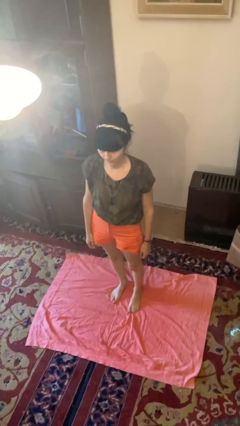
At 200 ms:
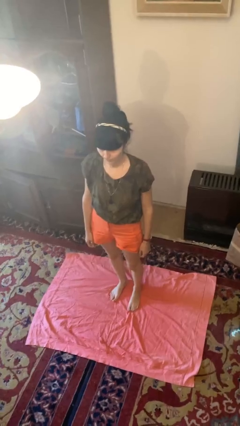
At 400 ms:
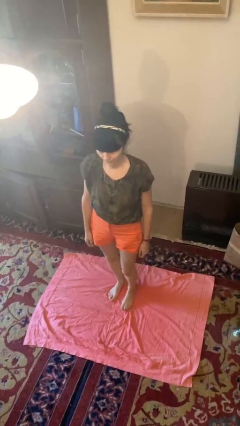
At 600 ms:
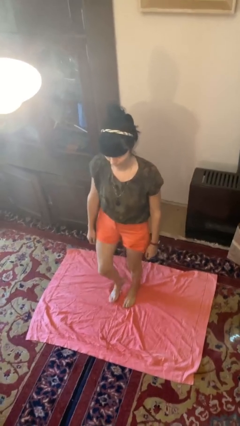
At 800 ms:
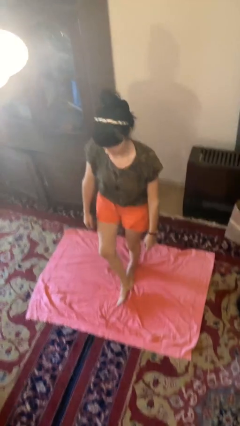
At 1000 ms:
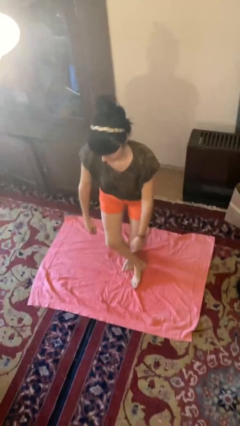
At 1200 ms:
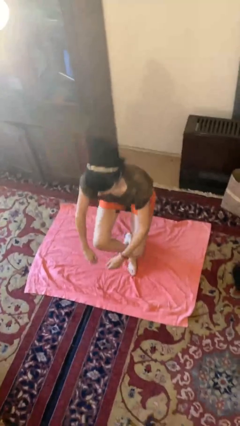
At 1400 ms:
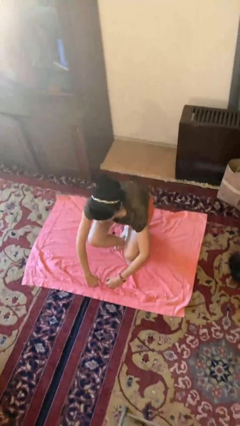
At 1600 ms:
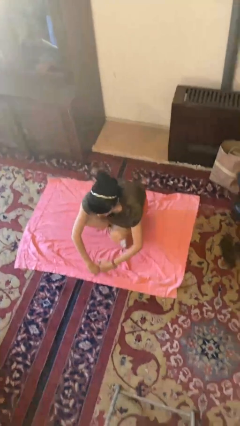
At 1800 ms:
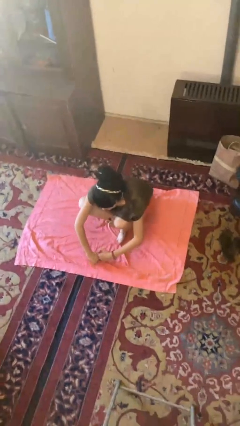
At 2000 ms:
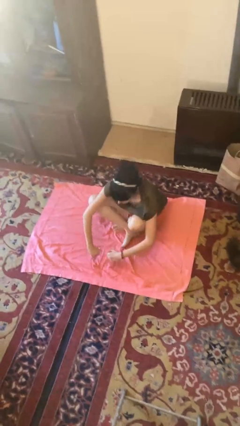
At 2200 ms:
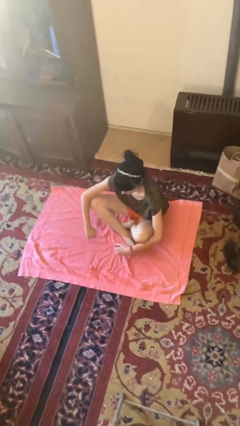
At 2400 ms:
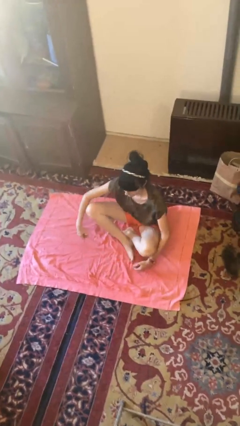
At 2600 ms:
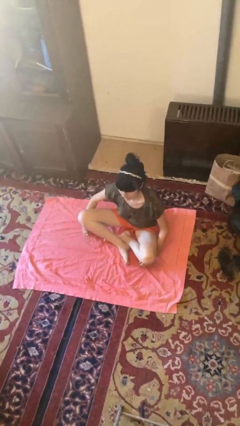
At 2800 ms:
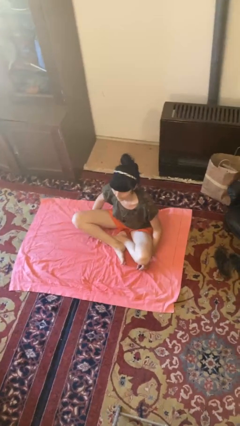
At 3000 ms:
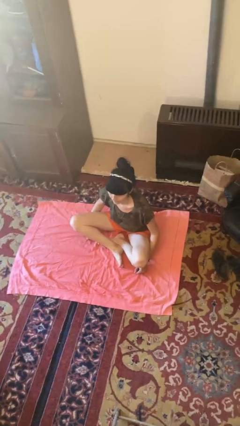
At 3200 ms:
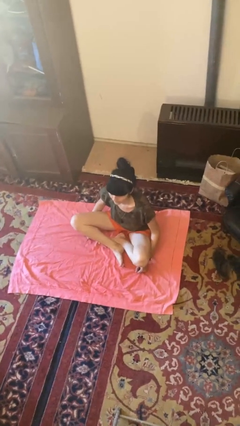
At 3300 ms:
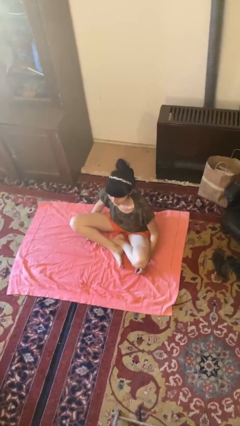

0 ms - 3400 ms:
person sits crisscross

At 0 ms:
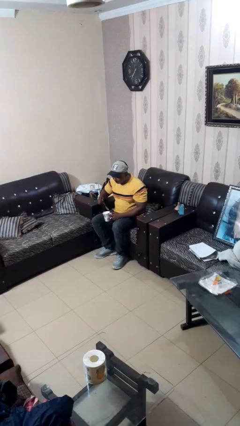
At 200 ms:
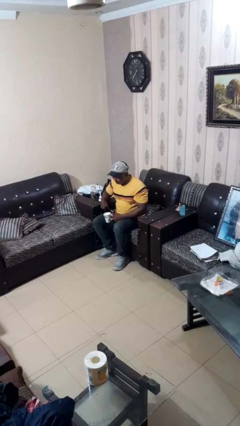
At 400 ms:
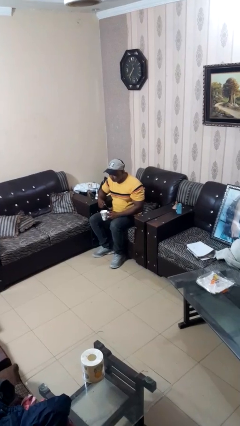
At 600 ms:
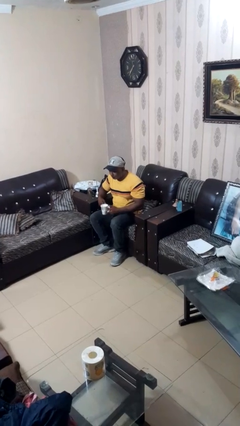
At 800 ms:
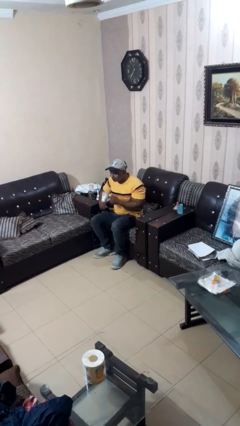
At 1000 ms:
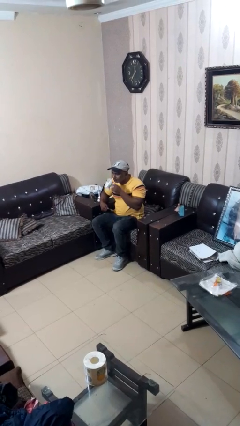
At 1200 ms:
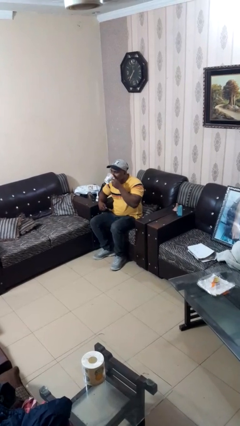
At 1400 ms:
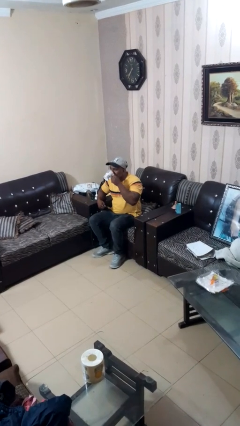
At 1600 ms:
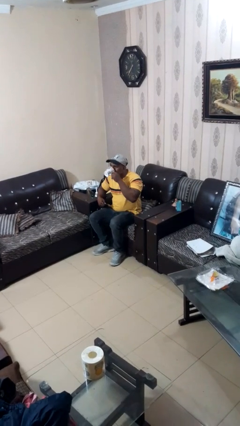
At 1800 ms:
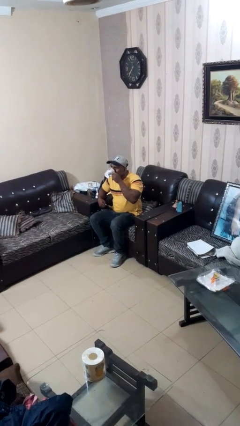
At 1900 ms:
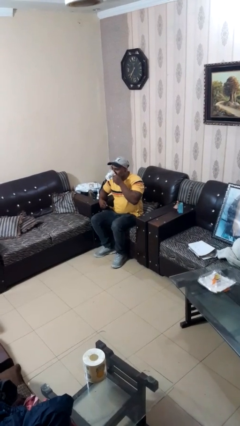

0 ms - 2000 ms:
person drinks from mug

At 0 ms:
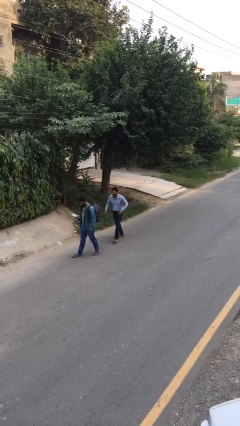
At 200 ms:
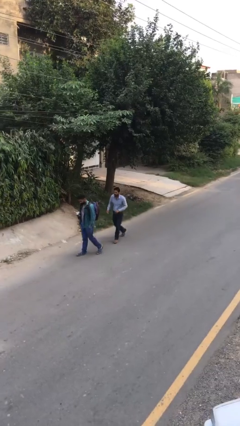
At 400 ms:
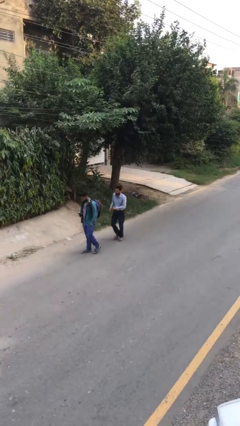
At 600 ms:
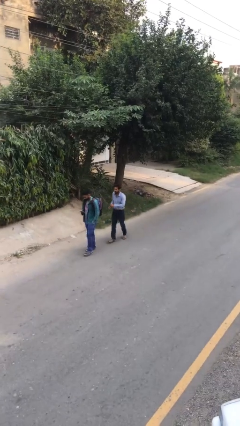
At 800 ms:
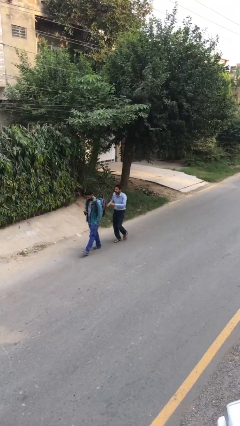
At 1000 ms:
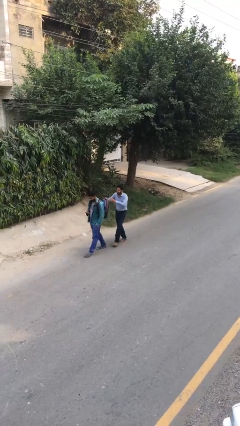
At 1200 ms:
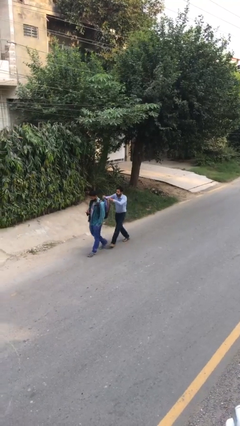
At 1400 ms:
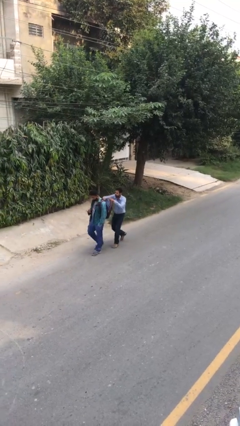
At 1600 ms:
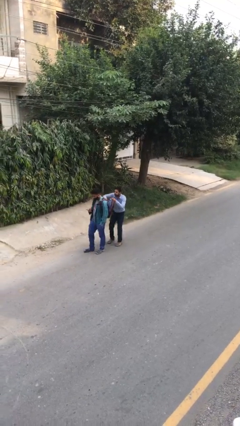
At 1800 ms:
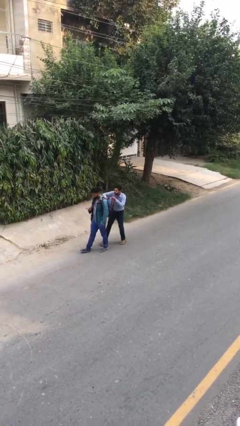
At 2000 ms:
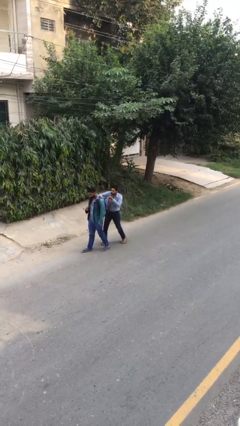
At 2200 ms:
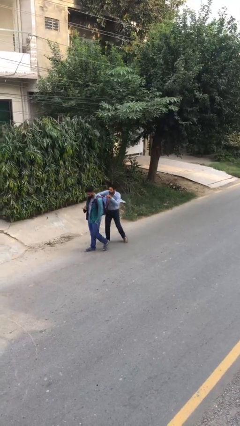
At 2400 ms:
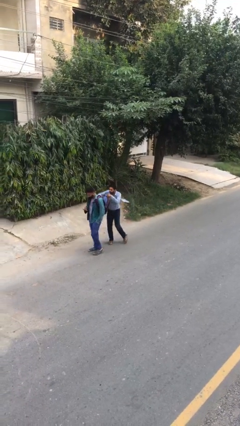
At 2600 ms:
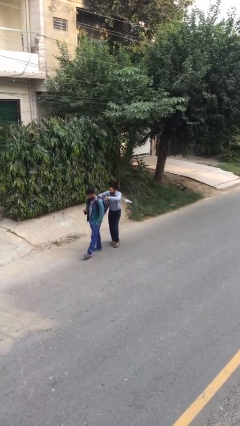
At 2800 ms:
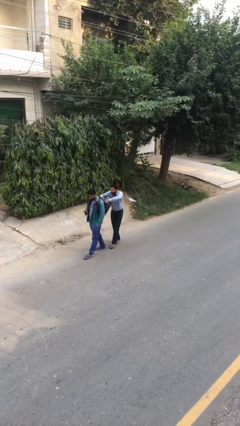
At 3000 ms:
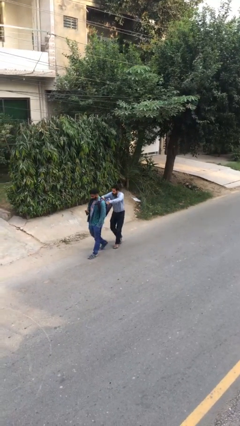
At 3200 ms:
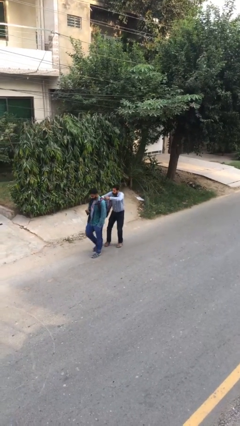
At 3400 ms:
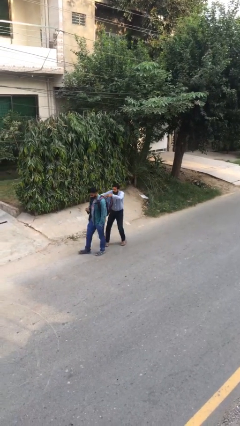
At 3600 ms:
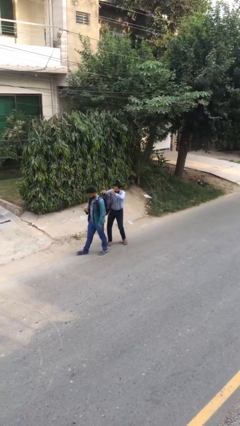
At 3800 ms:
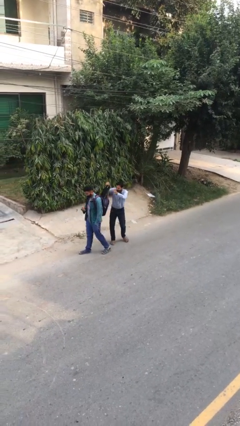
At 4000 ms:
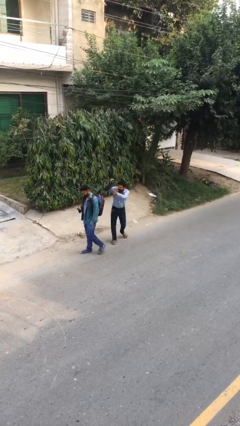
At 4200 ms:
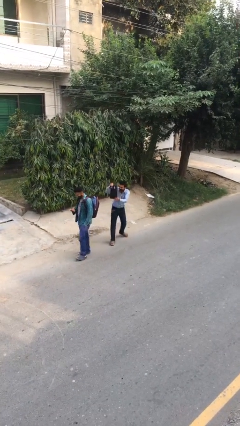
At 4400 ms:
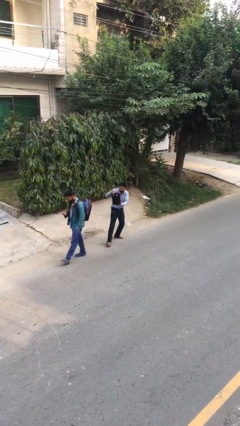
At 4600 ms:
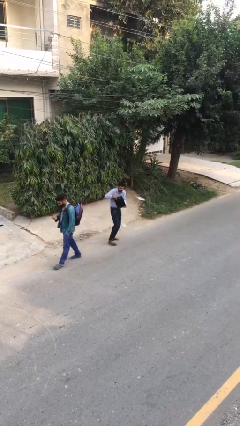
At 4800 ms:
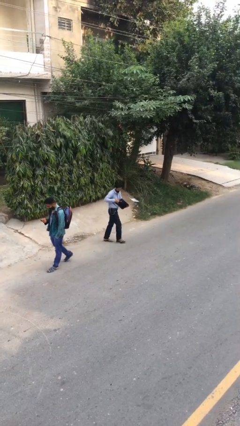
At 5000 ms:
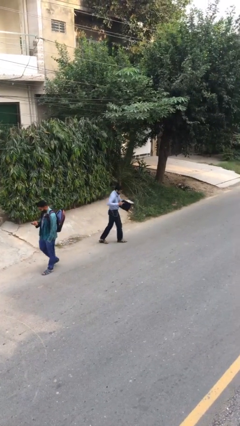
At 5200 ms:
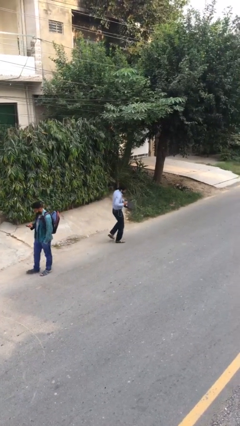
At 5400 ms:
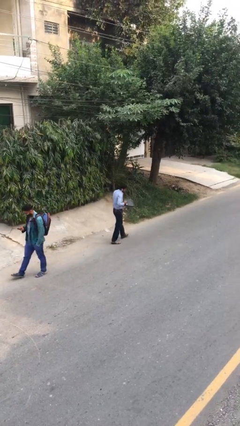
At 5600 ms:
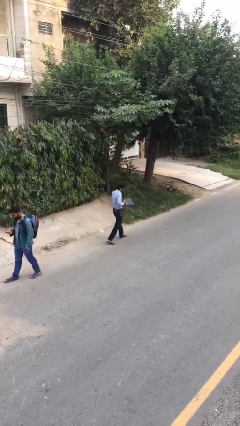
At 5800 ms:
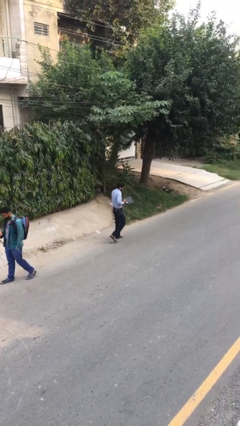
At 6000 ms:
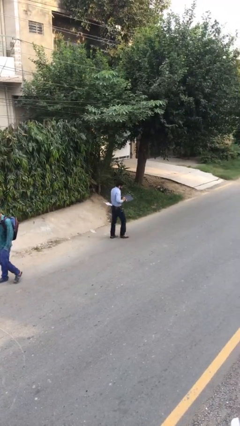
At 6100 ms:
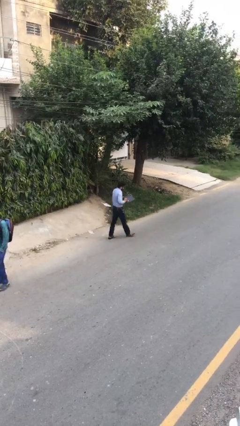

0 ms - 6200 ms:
person steals object from person

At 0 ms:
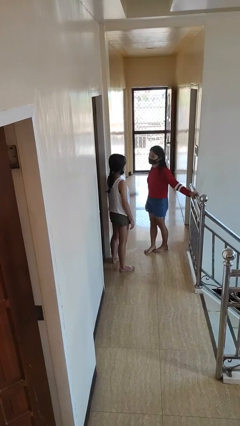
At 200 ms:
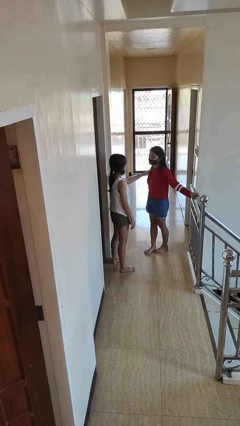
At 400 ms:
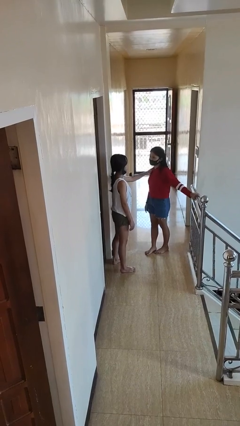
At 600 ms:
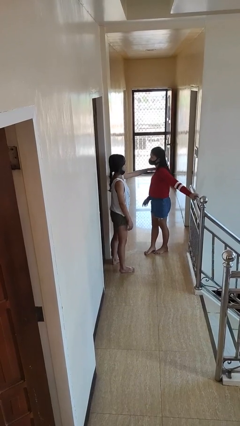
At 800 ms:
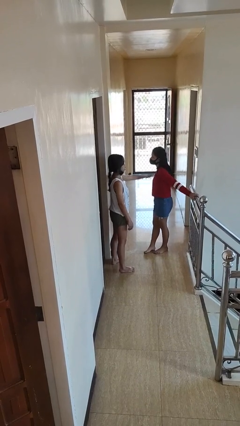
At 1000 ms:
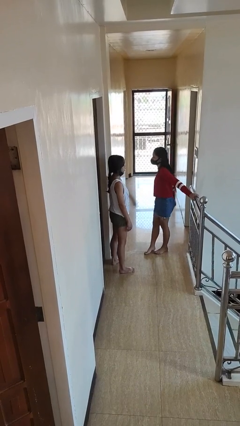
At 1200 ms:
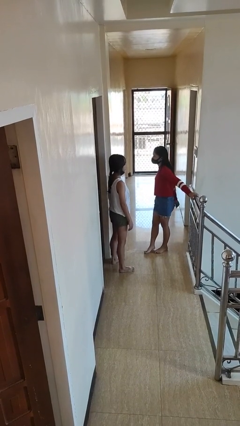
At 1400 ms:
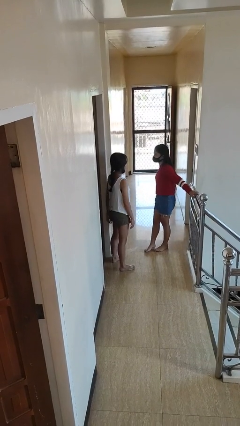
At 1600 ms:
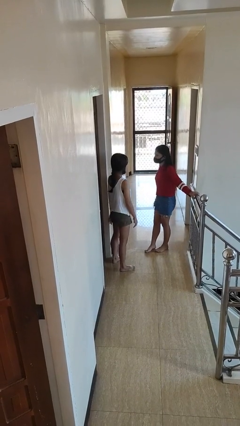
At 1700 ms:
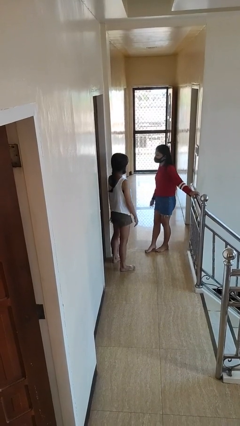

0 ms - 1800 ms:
person shoves person

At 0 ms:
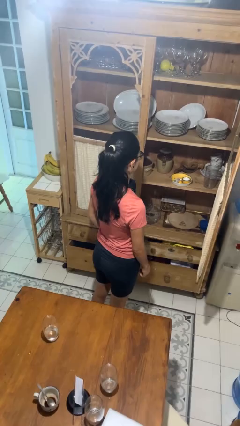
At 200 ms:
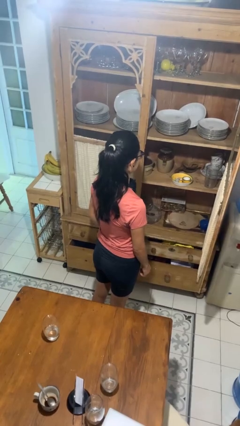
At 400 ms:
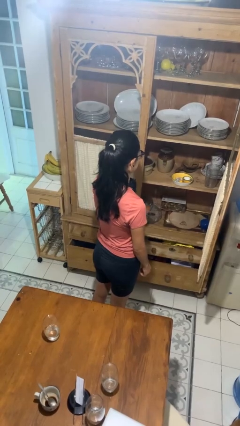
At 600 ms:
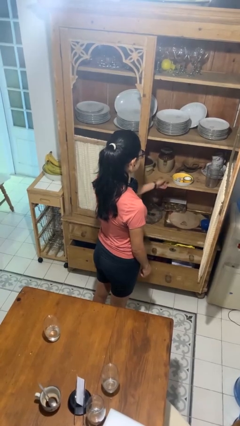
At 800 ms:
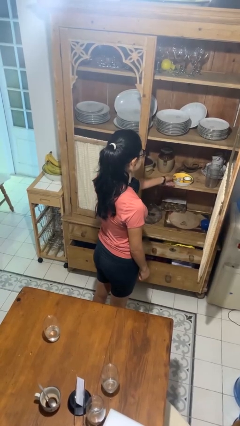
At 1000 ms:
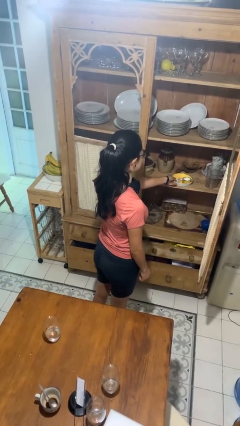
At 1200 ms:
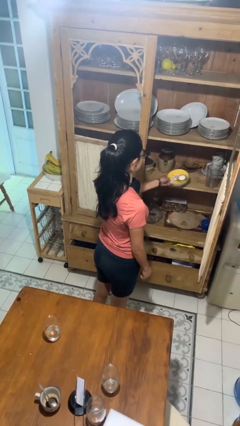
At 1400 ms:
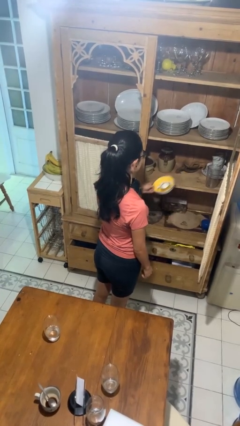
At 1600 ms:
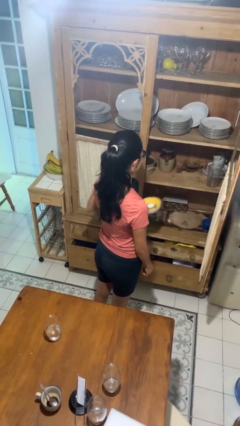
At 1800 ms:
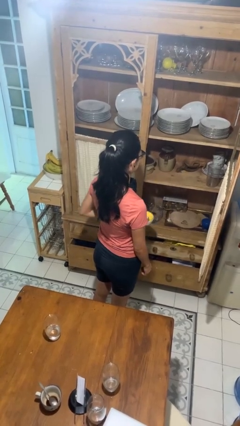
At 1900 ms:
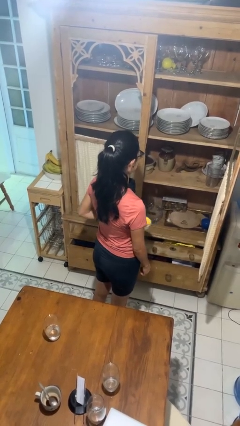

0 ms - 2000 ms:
person takes object from cabinet

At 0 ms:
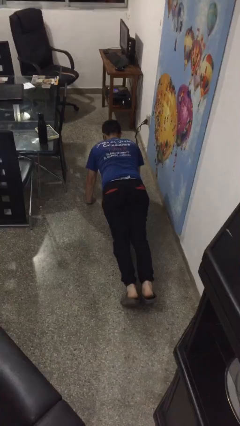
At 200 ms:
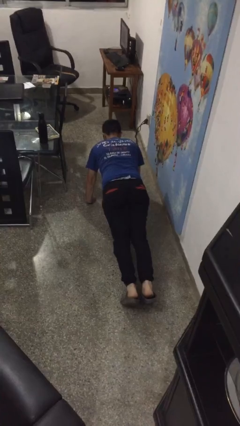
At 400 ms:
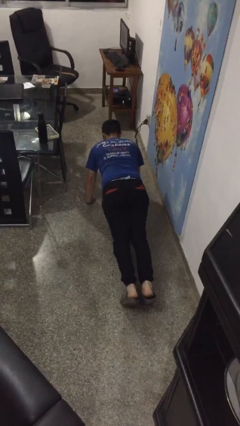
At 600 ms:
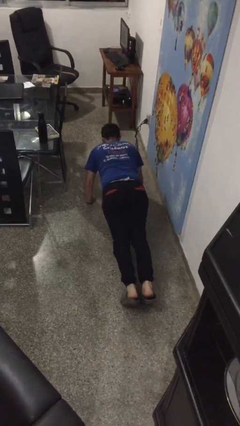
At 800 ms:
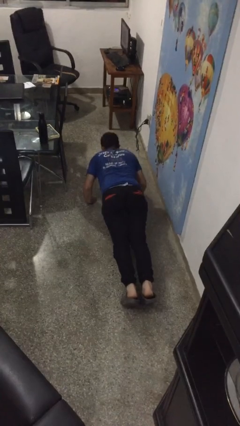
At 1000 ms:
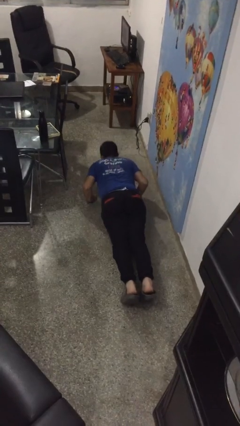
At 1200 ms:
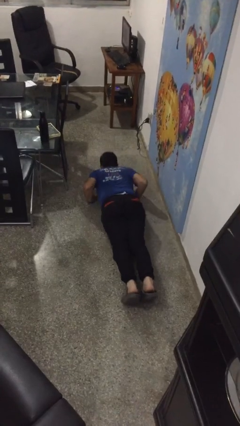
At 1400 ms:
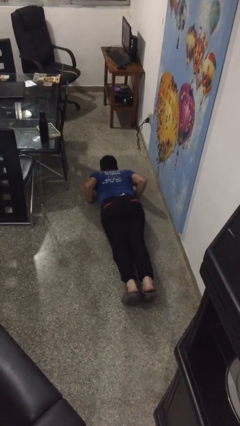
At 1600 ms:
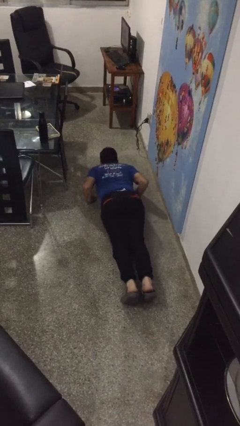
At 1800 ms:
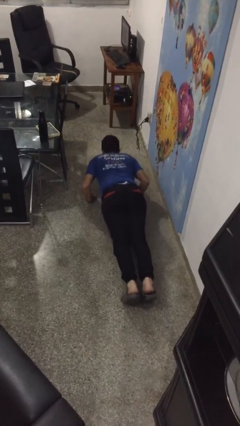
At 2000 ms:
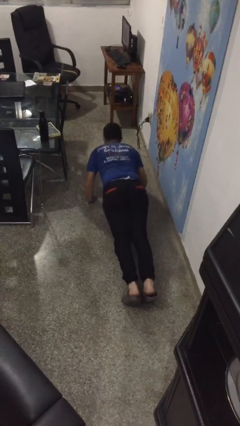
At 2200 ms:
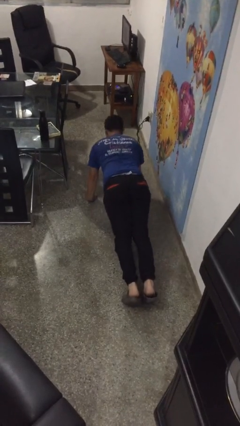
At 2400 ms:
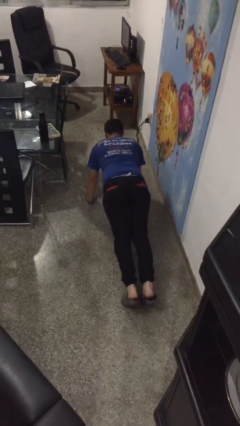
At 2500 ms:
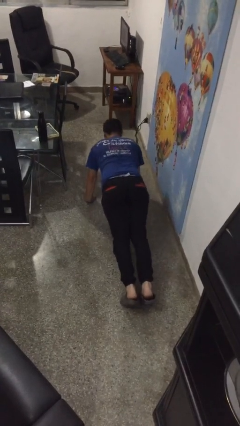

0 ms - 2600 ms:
person exercises with pushup
